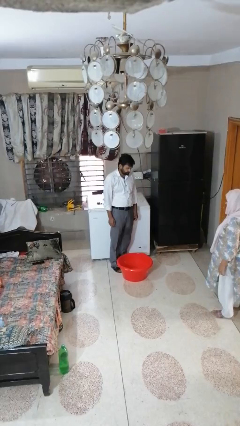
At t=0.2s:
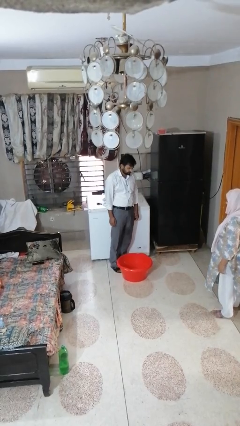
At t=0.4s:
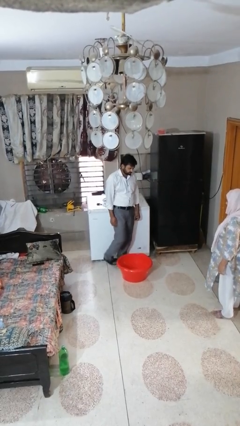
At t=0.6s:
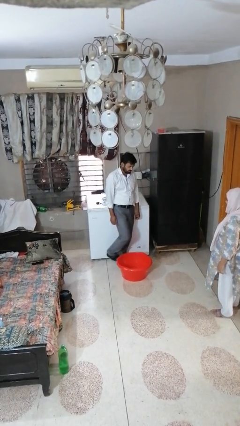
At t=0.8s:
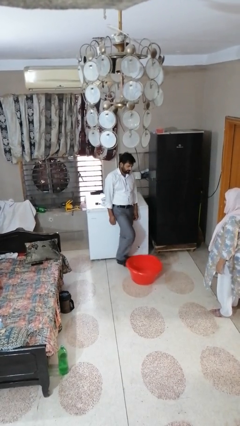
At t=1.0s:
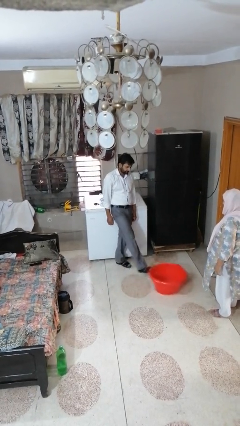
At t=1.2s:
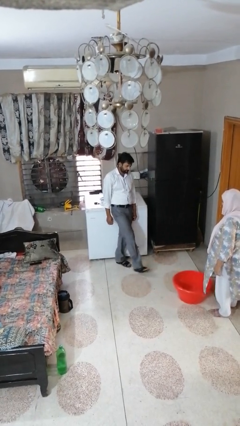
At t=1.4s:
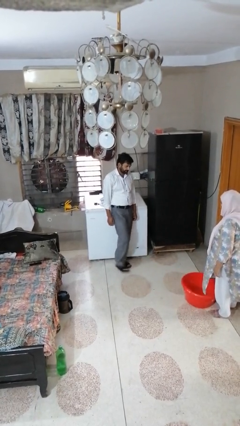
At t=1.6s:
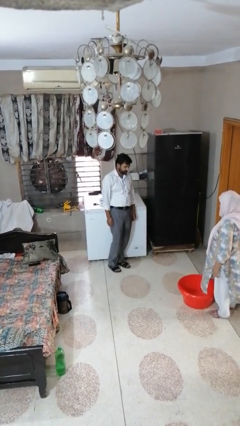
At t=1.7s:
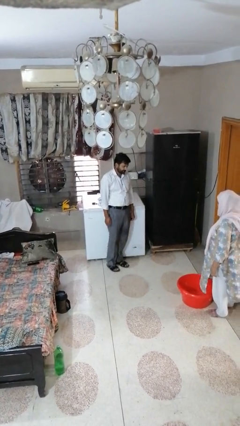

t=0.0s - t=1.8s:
person kicks object to person

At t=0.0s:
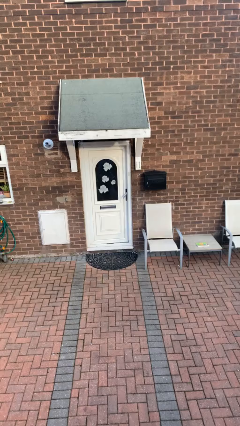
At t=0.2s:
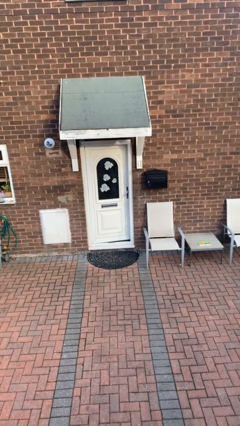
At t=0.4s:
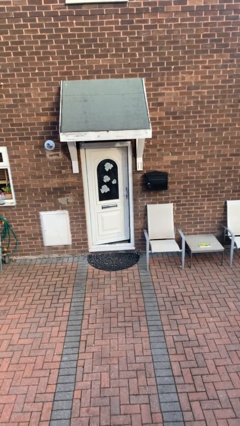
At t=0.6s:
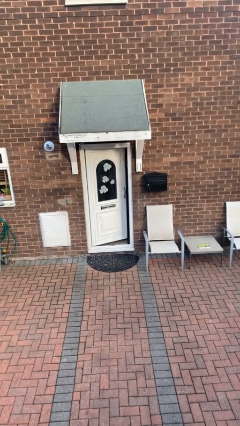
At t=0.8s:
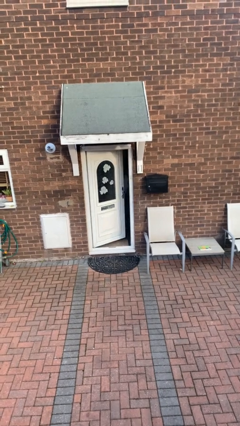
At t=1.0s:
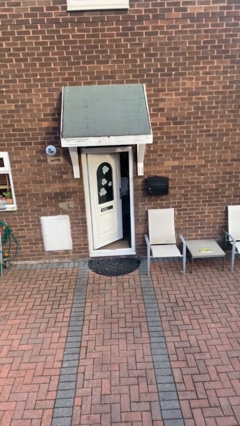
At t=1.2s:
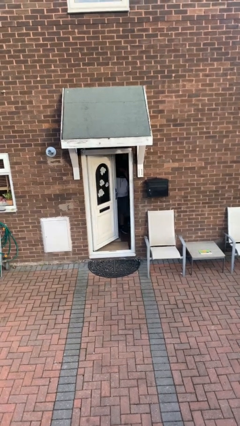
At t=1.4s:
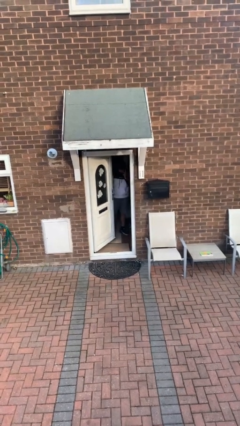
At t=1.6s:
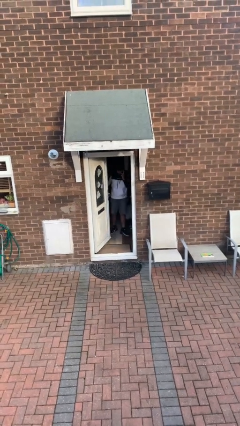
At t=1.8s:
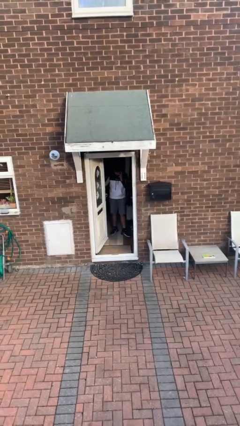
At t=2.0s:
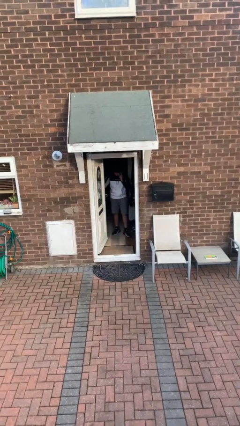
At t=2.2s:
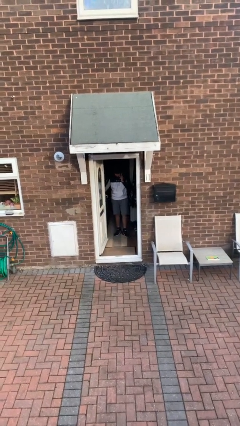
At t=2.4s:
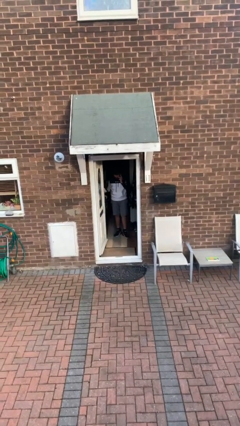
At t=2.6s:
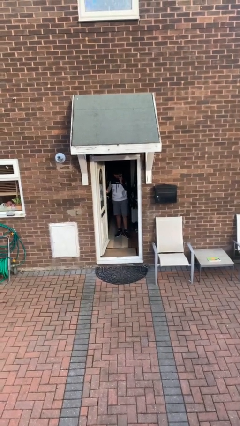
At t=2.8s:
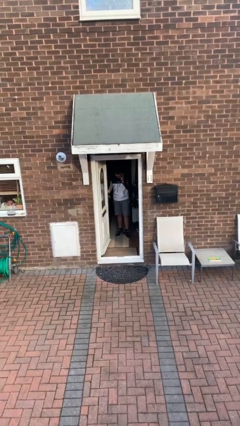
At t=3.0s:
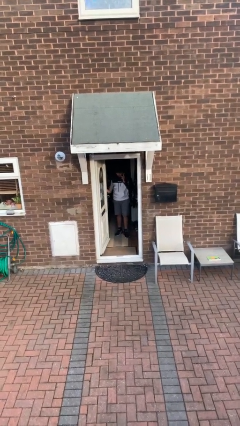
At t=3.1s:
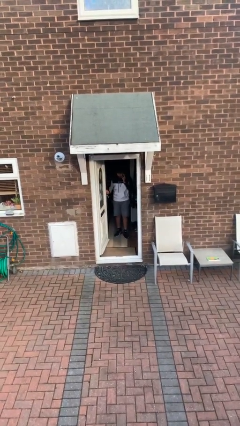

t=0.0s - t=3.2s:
person opens facility door

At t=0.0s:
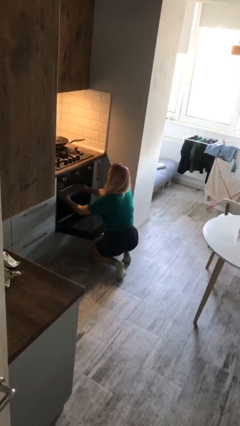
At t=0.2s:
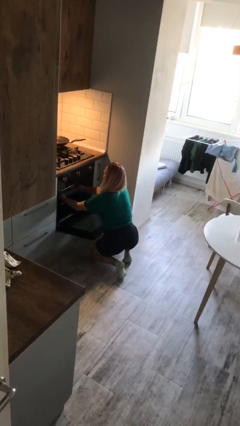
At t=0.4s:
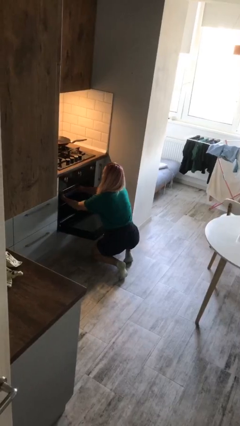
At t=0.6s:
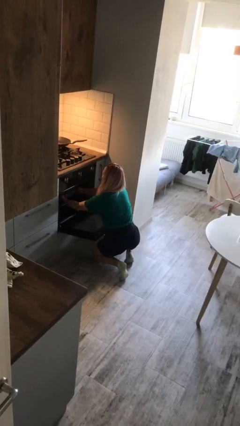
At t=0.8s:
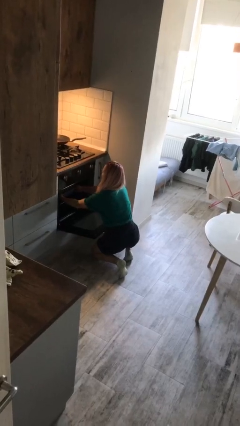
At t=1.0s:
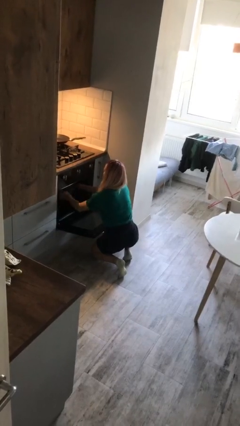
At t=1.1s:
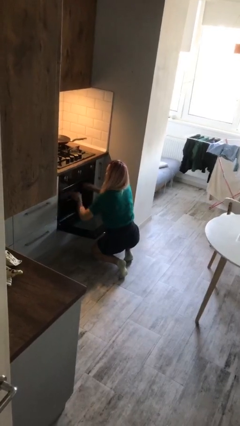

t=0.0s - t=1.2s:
person puts object into oven

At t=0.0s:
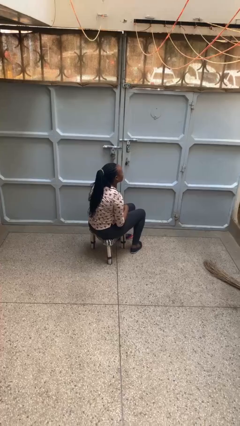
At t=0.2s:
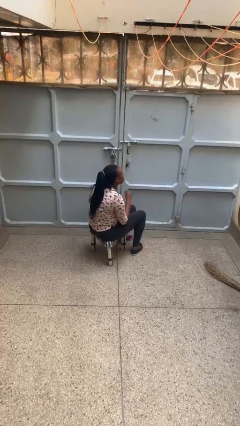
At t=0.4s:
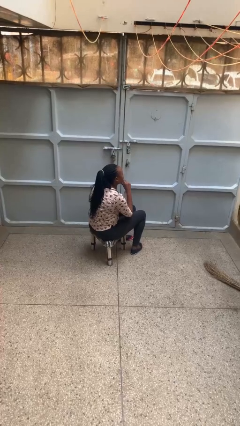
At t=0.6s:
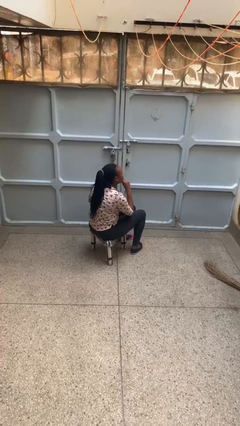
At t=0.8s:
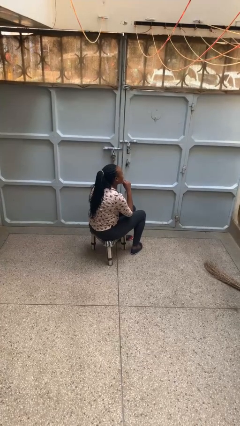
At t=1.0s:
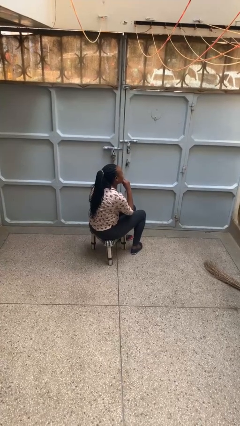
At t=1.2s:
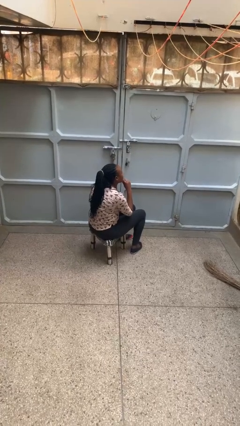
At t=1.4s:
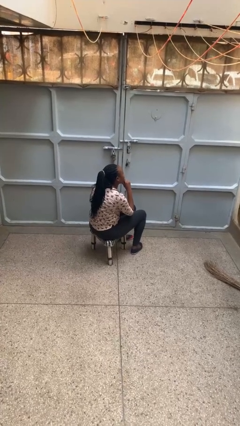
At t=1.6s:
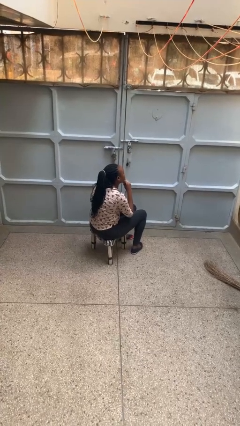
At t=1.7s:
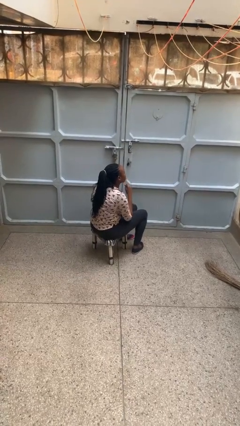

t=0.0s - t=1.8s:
person strokes chin

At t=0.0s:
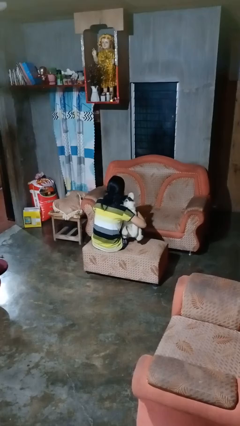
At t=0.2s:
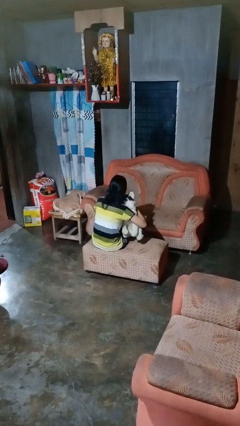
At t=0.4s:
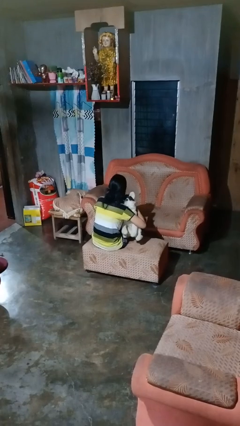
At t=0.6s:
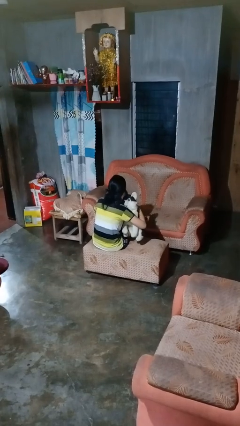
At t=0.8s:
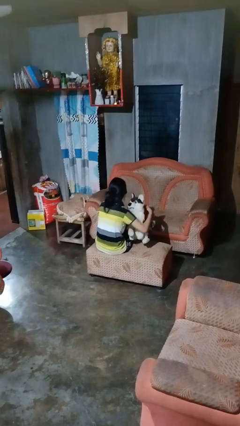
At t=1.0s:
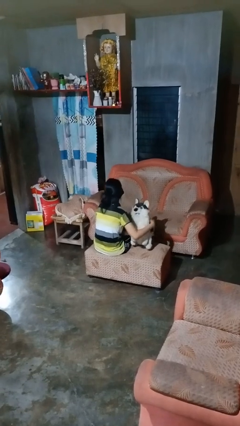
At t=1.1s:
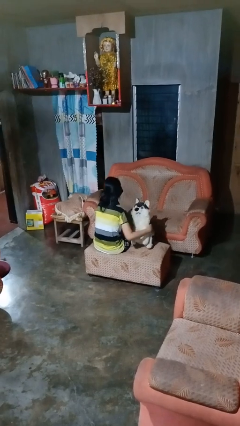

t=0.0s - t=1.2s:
person hugs stuffed animal

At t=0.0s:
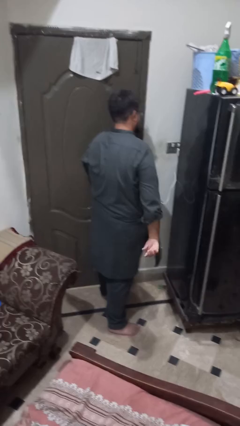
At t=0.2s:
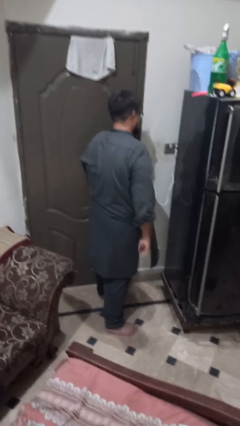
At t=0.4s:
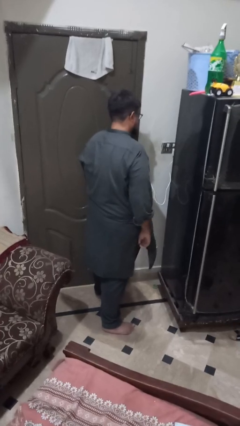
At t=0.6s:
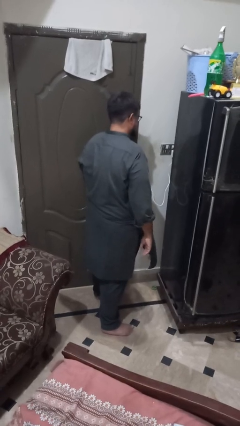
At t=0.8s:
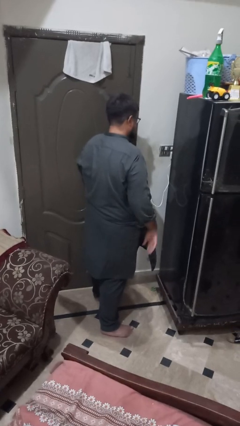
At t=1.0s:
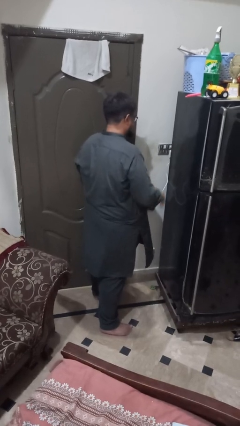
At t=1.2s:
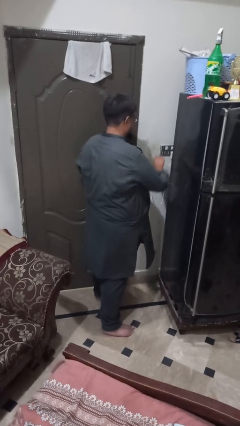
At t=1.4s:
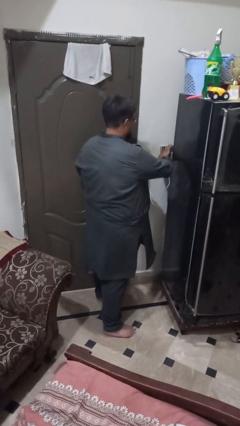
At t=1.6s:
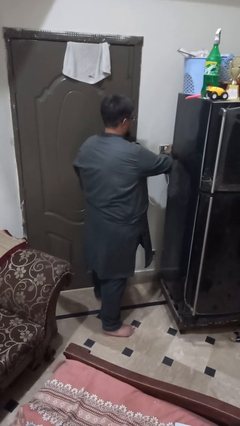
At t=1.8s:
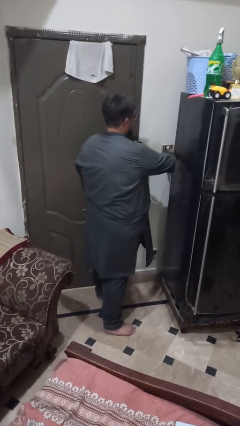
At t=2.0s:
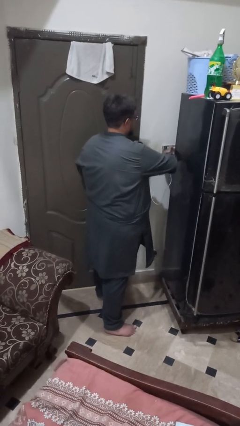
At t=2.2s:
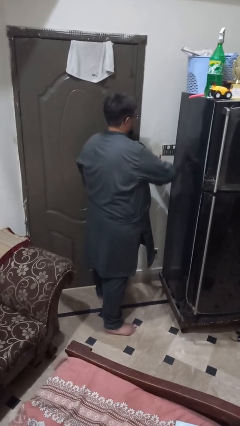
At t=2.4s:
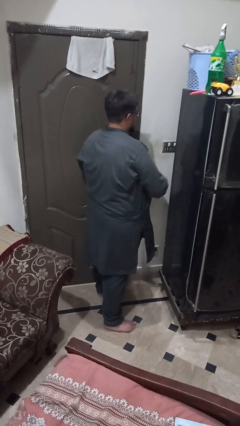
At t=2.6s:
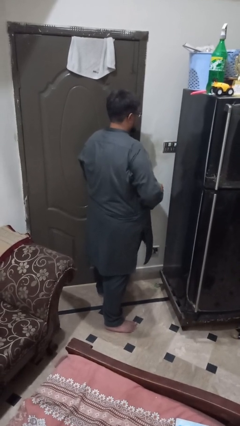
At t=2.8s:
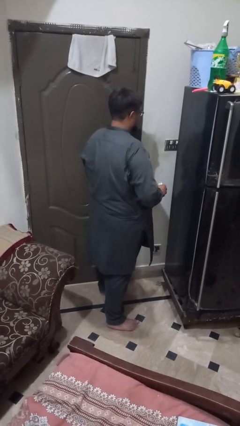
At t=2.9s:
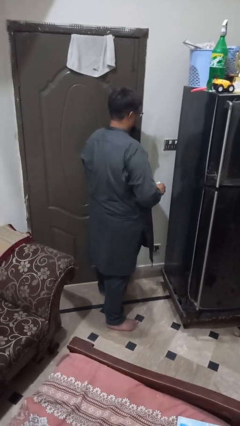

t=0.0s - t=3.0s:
person unplugs from electrical socket

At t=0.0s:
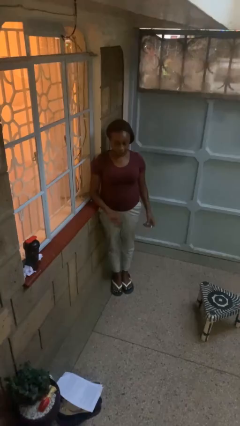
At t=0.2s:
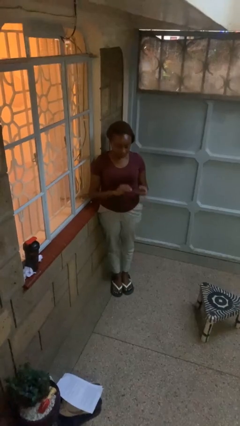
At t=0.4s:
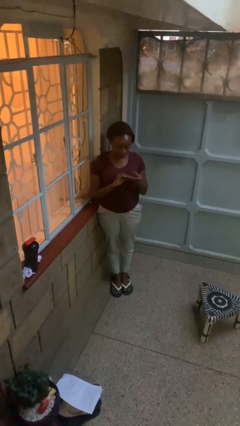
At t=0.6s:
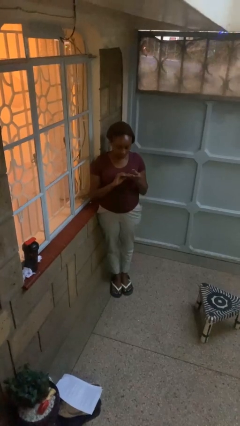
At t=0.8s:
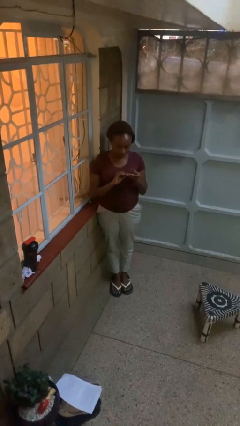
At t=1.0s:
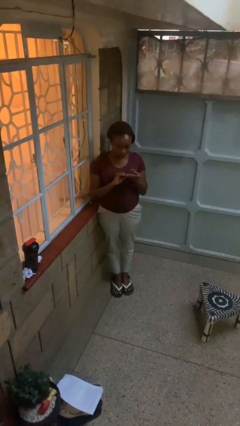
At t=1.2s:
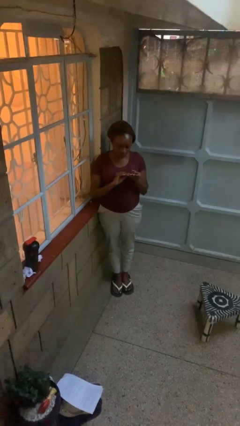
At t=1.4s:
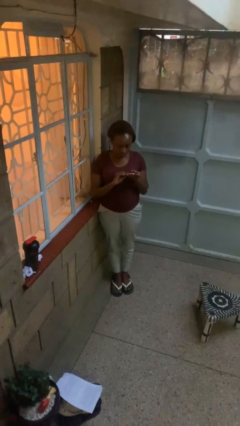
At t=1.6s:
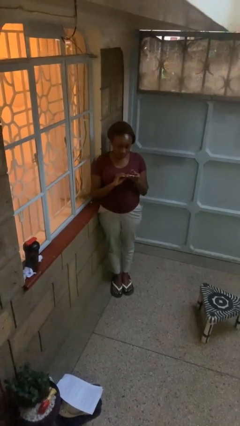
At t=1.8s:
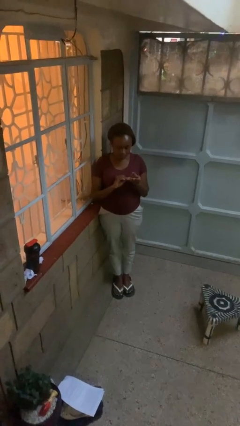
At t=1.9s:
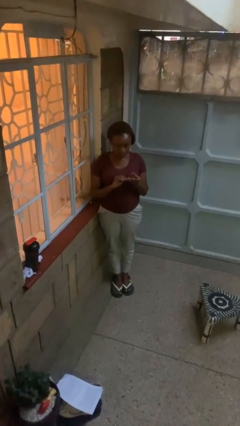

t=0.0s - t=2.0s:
person clips fingernails

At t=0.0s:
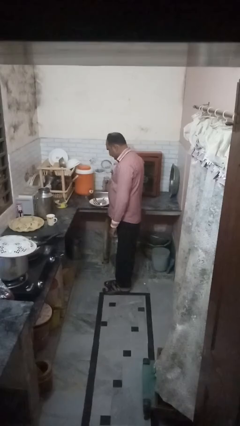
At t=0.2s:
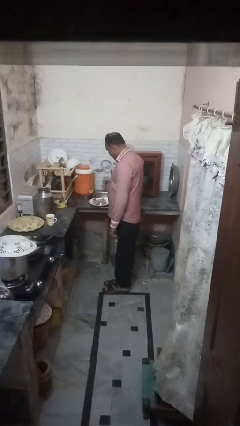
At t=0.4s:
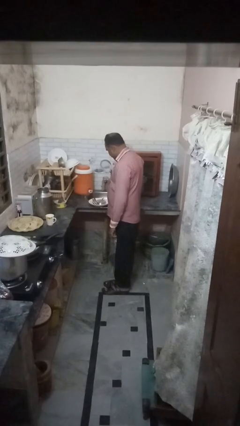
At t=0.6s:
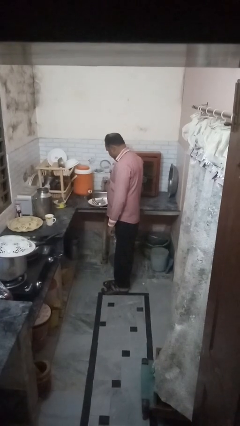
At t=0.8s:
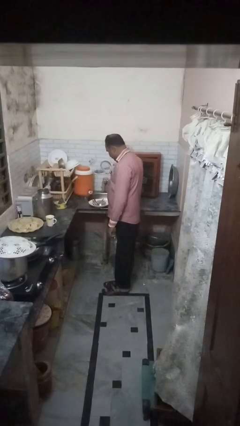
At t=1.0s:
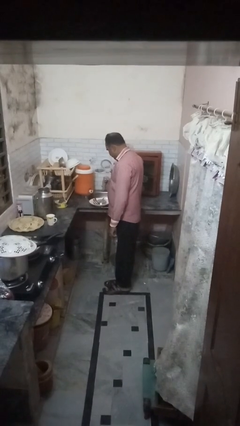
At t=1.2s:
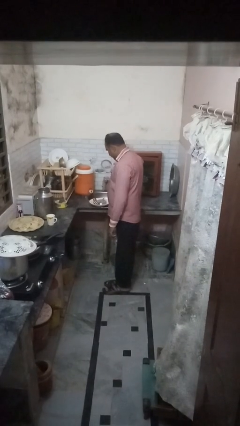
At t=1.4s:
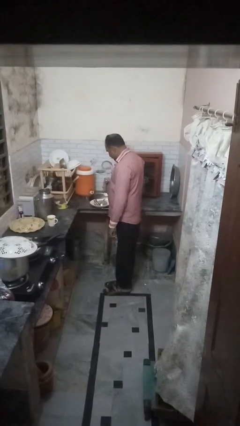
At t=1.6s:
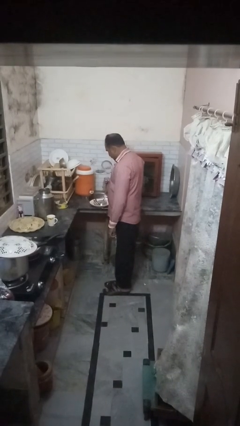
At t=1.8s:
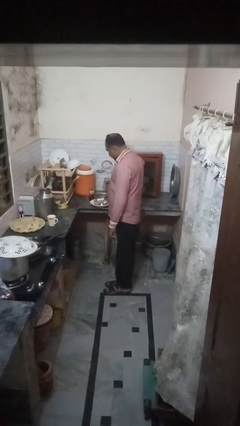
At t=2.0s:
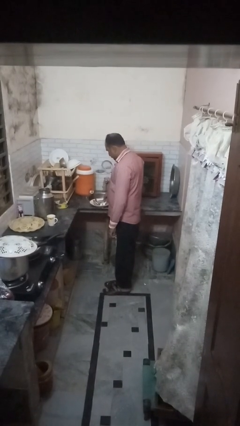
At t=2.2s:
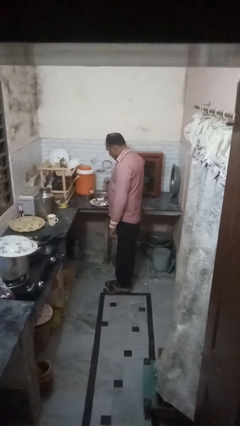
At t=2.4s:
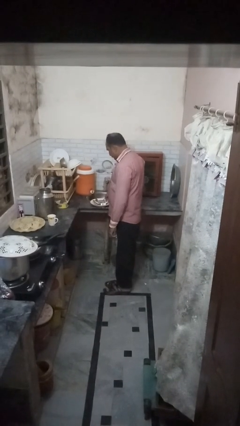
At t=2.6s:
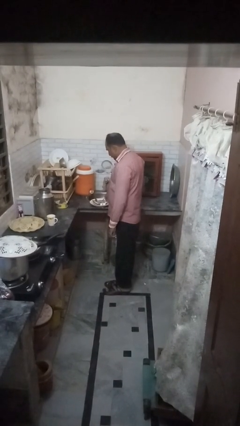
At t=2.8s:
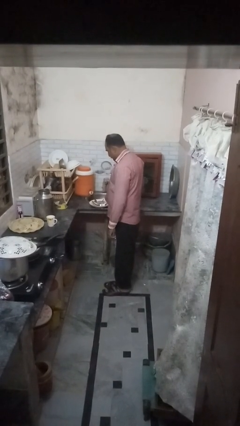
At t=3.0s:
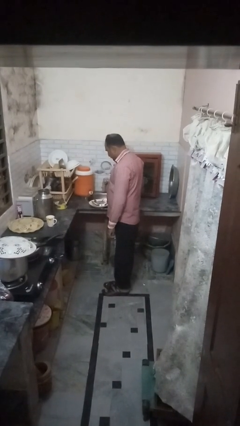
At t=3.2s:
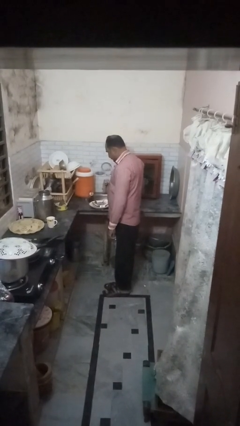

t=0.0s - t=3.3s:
person unloads dishwasher
